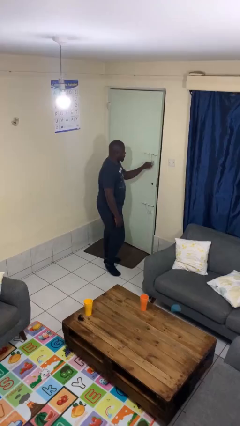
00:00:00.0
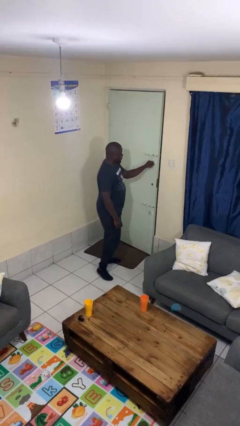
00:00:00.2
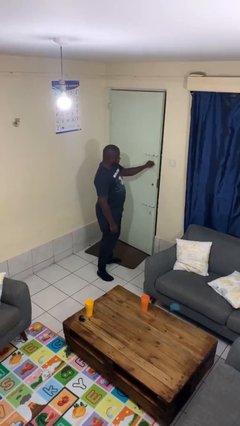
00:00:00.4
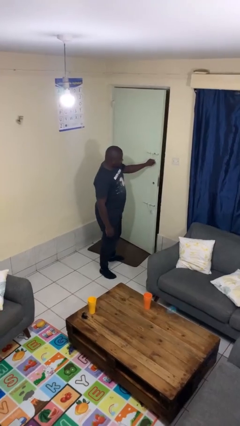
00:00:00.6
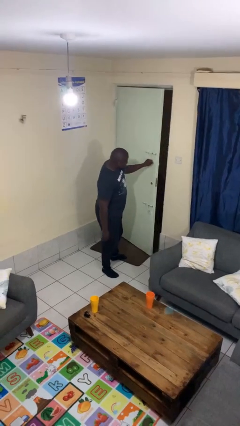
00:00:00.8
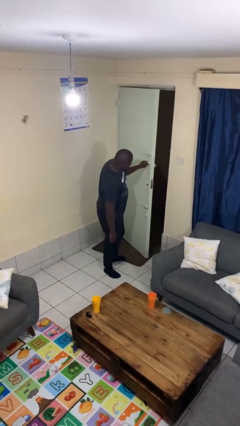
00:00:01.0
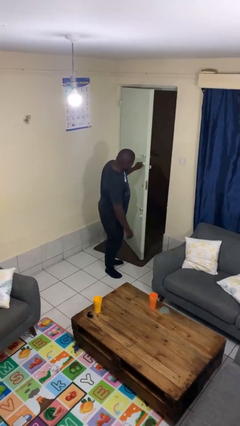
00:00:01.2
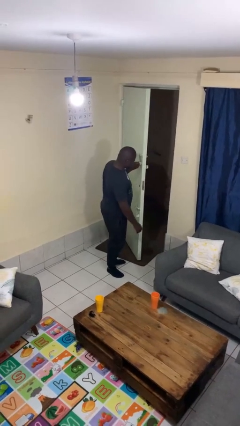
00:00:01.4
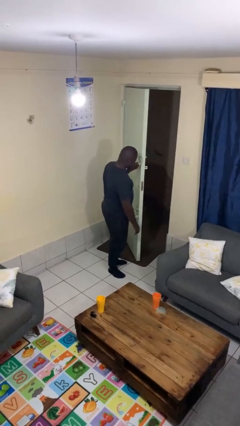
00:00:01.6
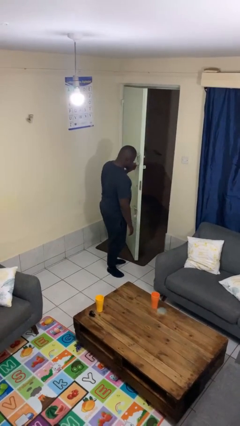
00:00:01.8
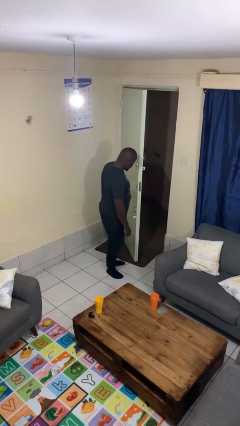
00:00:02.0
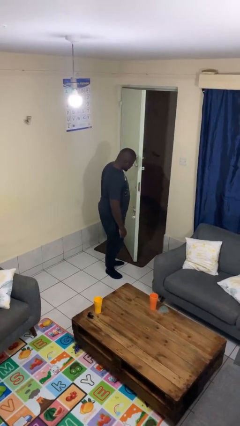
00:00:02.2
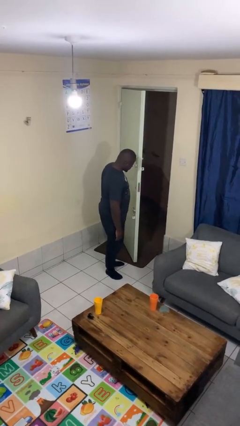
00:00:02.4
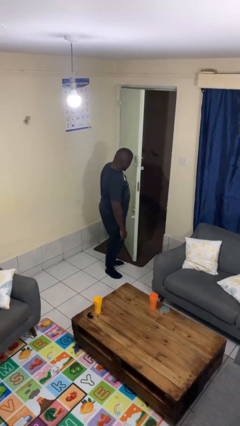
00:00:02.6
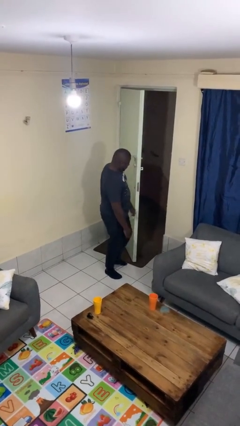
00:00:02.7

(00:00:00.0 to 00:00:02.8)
person opens facility door

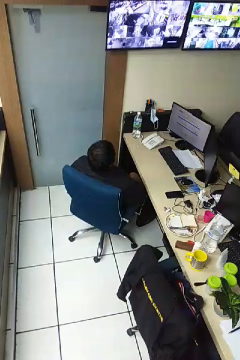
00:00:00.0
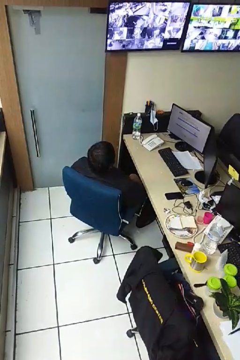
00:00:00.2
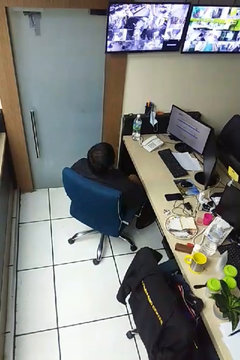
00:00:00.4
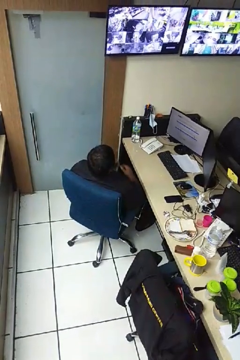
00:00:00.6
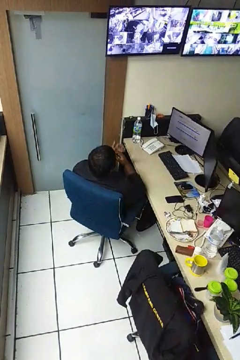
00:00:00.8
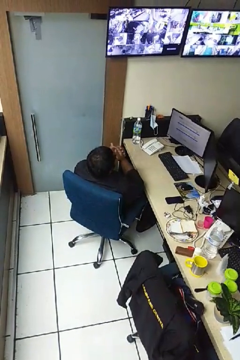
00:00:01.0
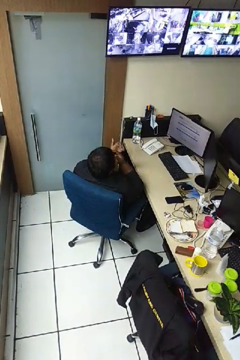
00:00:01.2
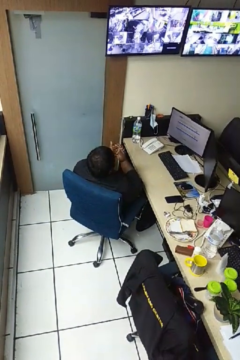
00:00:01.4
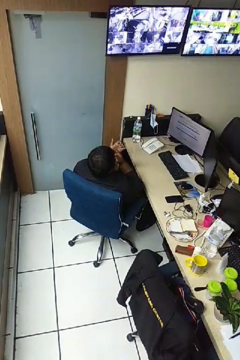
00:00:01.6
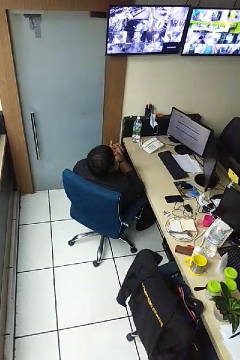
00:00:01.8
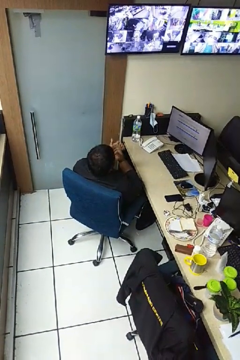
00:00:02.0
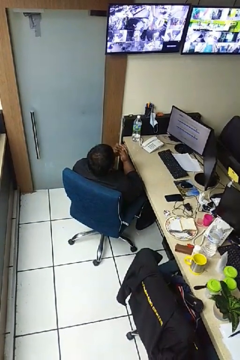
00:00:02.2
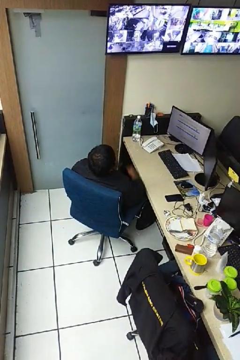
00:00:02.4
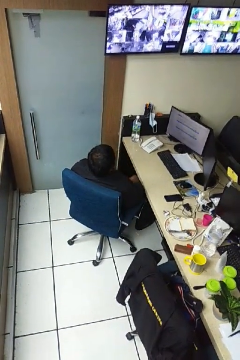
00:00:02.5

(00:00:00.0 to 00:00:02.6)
person claps hands

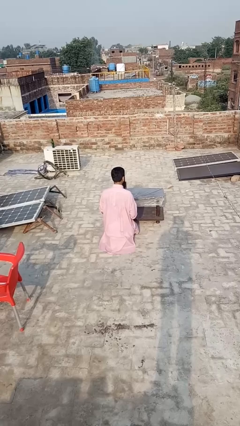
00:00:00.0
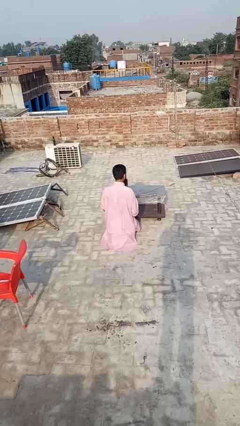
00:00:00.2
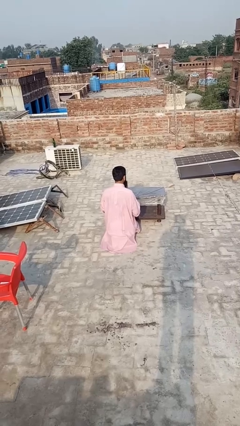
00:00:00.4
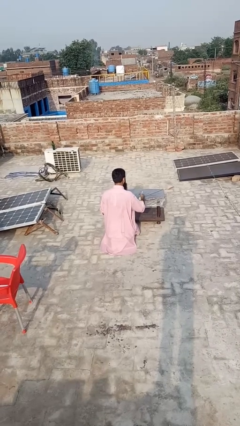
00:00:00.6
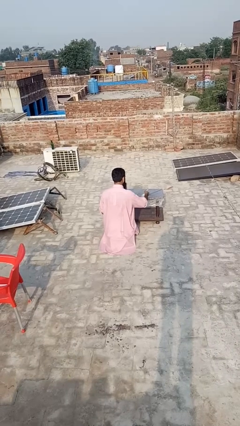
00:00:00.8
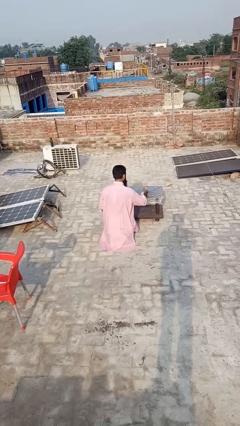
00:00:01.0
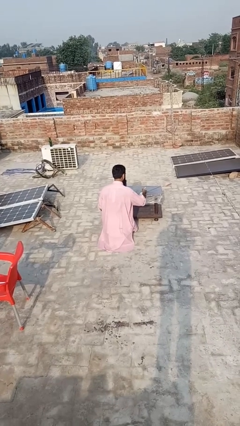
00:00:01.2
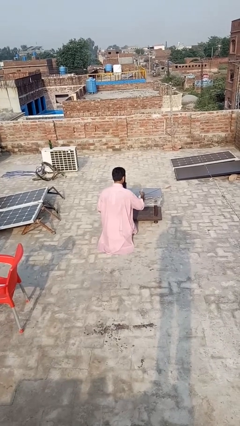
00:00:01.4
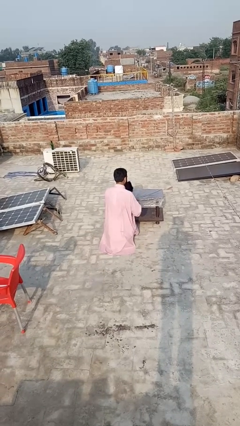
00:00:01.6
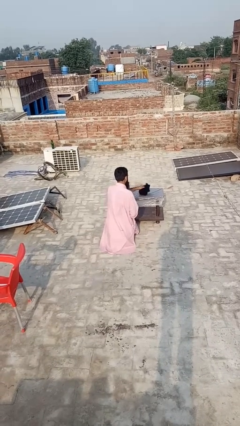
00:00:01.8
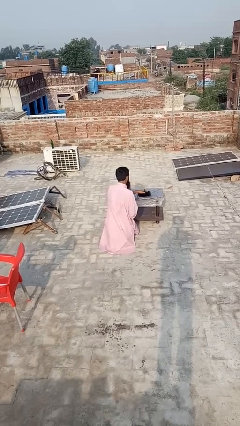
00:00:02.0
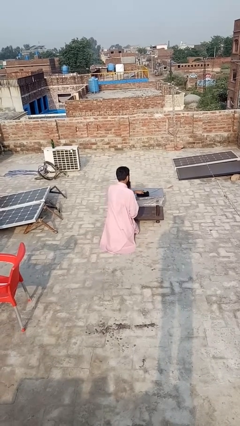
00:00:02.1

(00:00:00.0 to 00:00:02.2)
person sprays from bottle

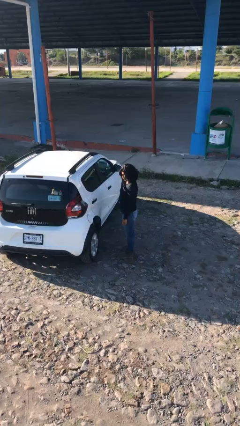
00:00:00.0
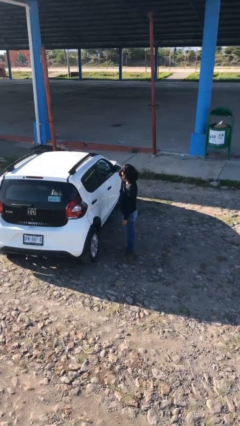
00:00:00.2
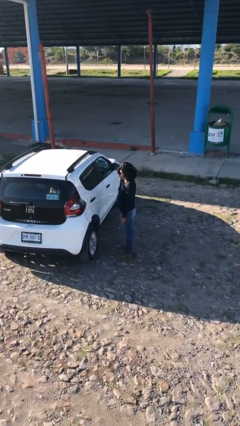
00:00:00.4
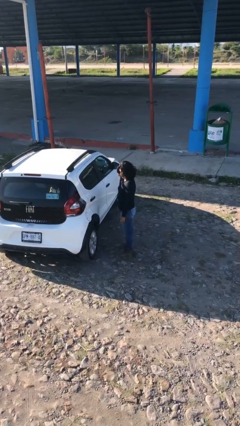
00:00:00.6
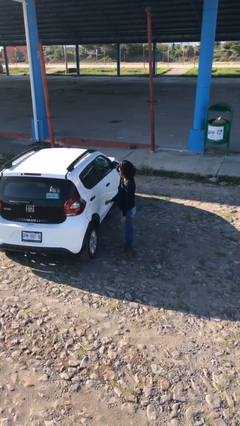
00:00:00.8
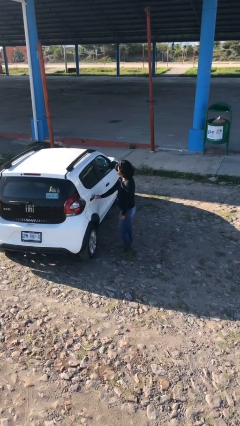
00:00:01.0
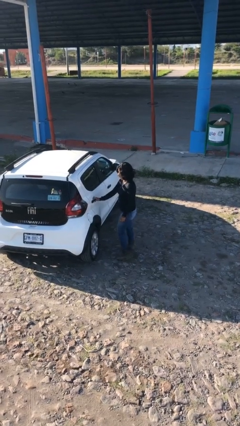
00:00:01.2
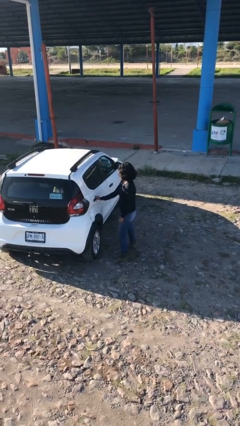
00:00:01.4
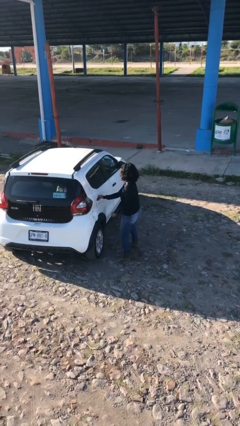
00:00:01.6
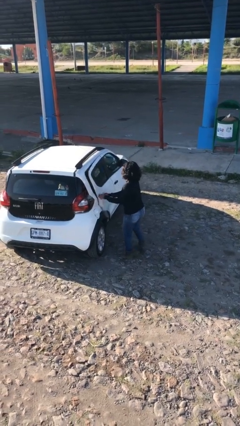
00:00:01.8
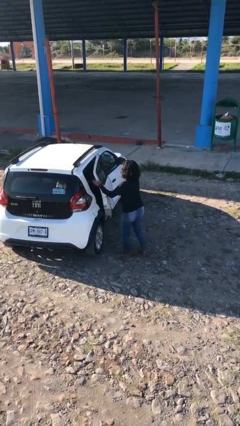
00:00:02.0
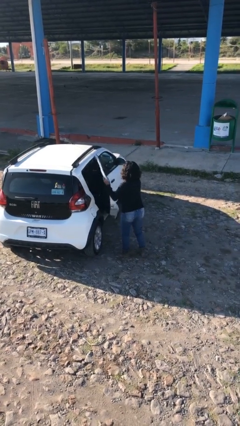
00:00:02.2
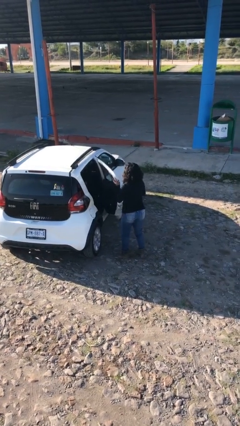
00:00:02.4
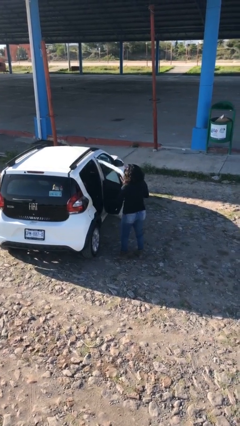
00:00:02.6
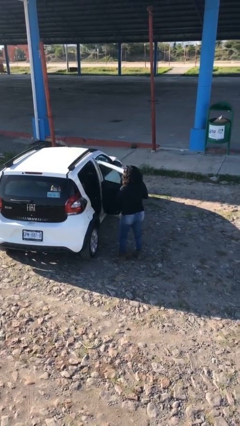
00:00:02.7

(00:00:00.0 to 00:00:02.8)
person opens car door

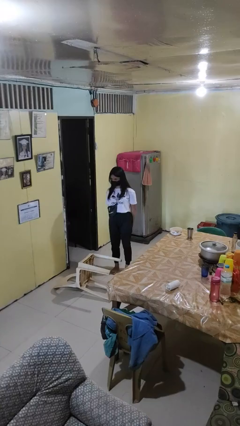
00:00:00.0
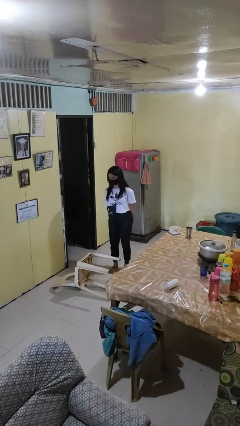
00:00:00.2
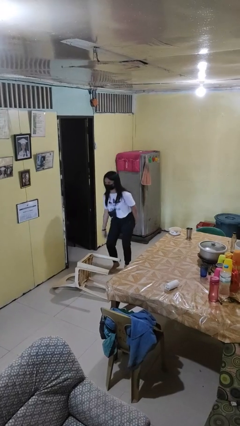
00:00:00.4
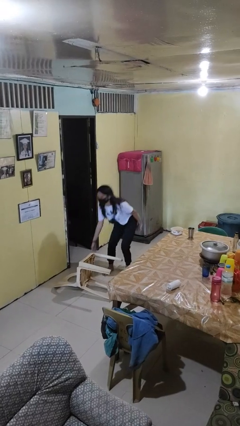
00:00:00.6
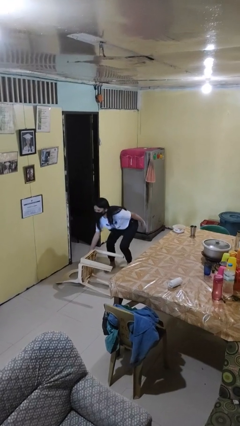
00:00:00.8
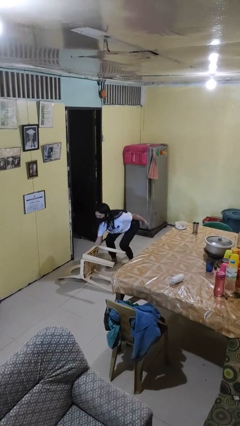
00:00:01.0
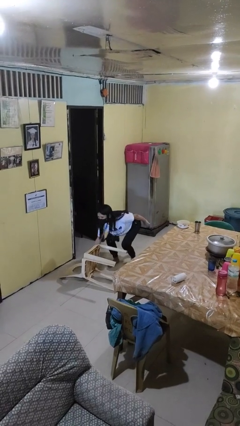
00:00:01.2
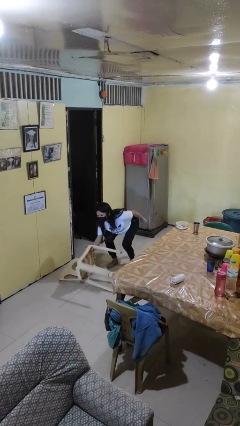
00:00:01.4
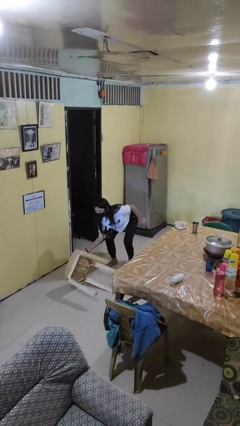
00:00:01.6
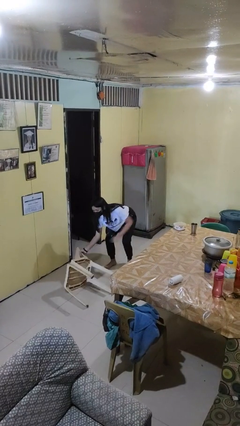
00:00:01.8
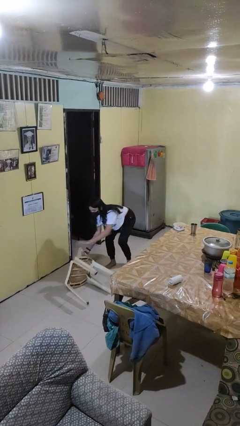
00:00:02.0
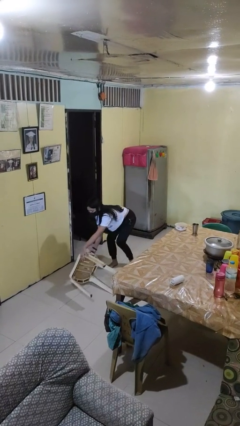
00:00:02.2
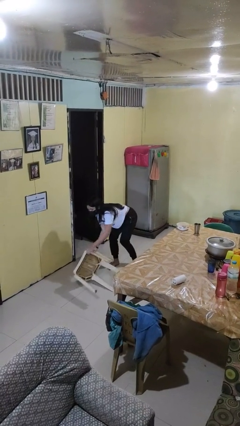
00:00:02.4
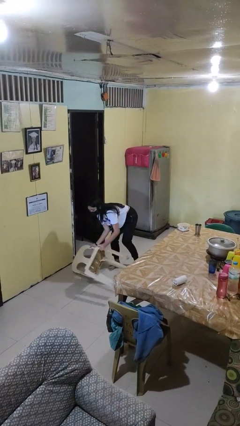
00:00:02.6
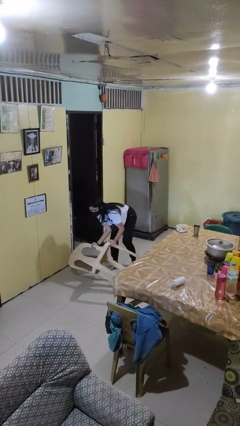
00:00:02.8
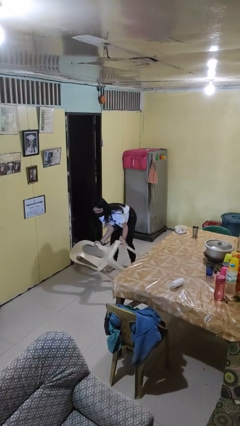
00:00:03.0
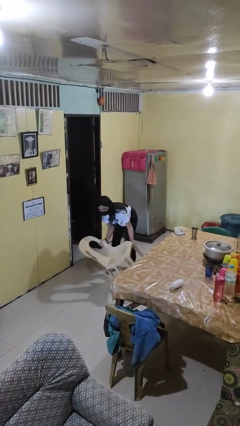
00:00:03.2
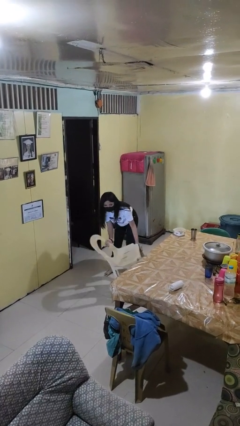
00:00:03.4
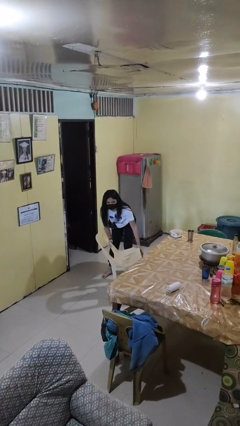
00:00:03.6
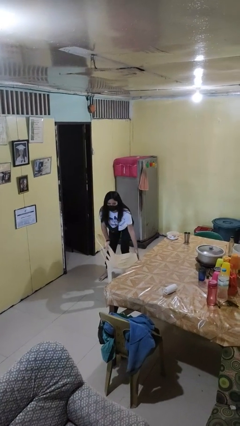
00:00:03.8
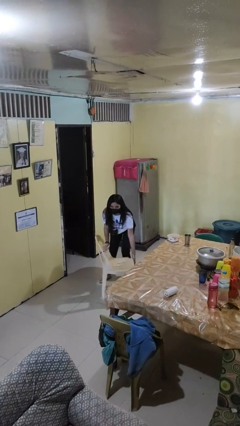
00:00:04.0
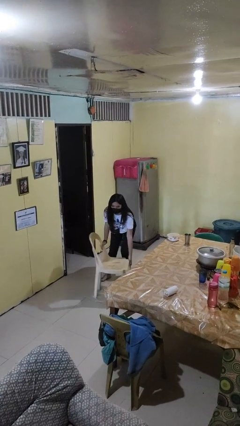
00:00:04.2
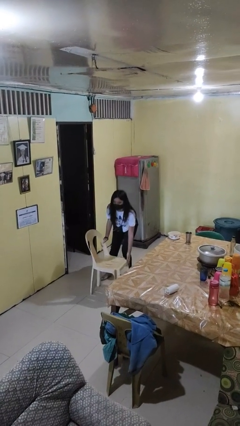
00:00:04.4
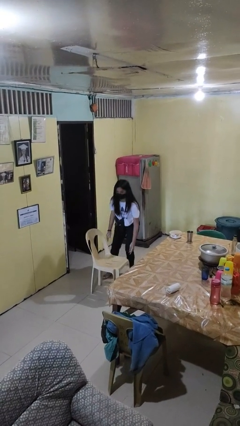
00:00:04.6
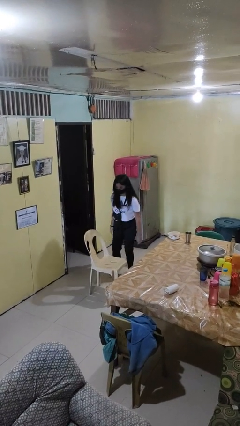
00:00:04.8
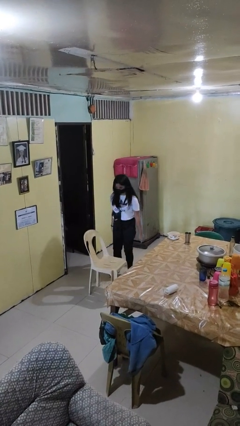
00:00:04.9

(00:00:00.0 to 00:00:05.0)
person sets upright furniture

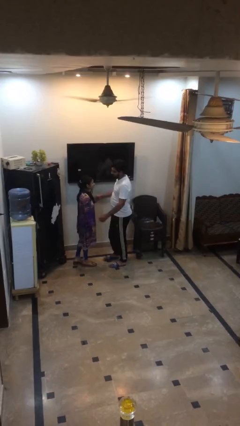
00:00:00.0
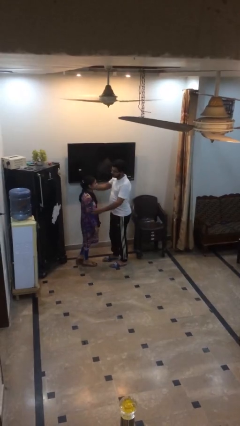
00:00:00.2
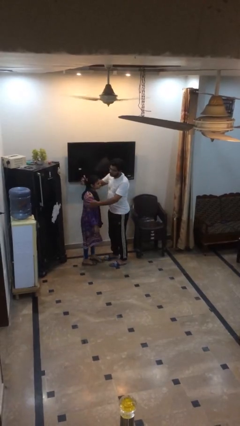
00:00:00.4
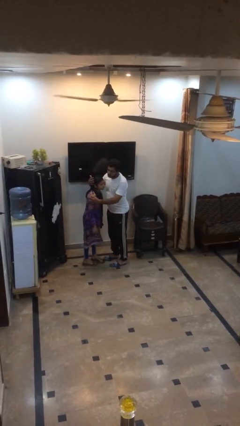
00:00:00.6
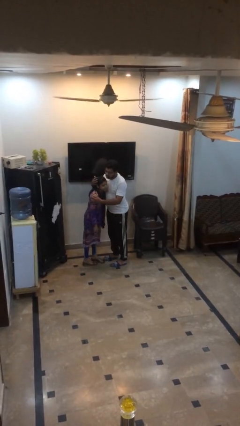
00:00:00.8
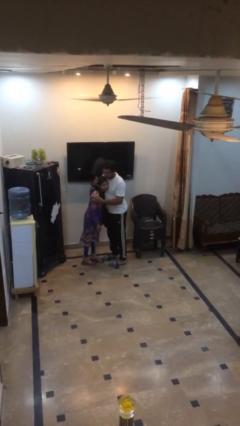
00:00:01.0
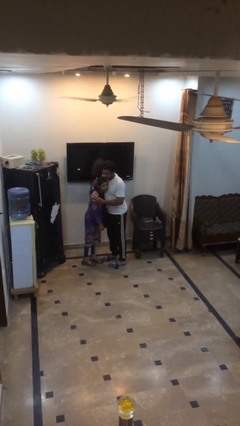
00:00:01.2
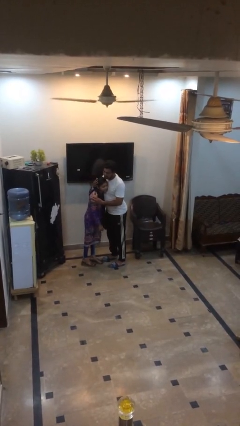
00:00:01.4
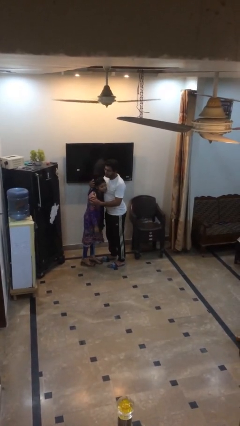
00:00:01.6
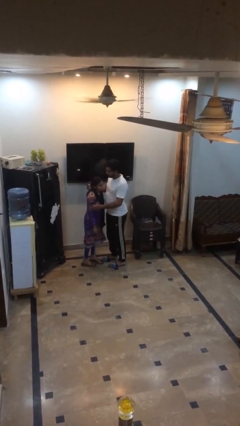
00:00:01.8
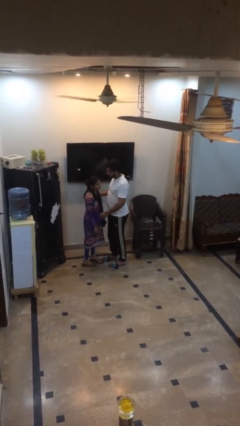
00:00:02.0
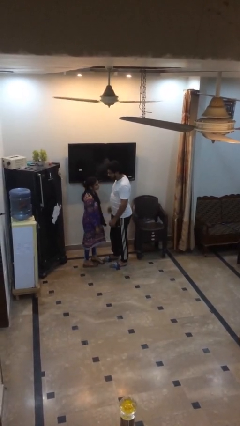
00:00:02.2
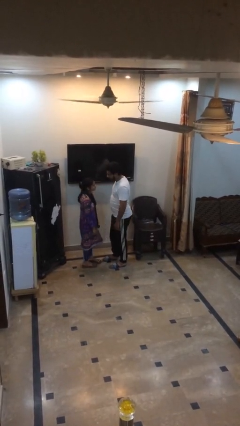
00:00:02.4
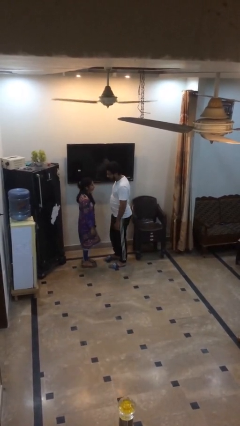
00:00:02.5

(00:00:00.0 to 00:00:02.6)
person embraces person
